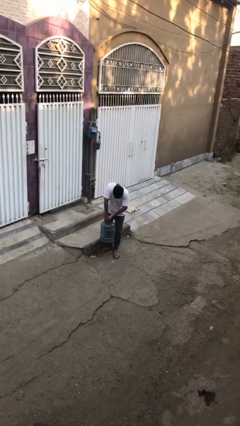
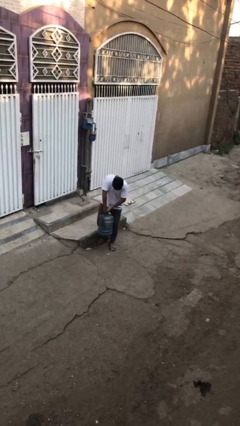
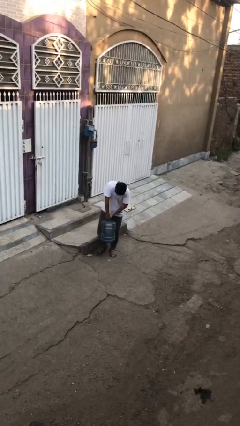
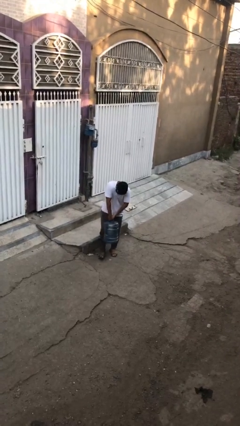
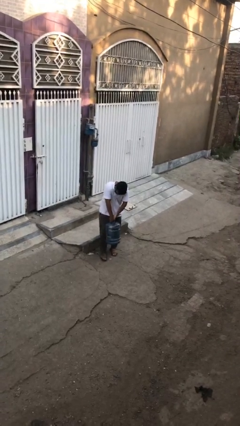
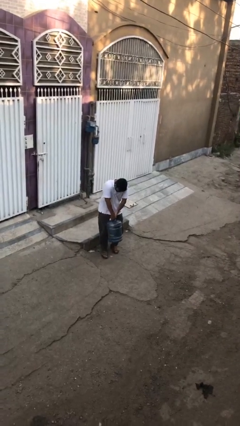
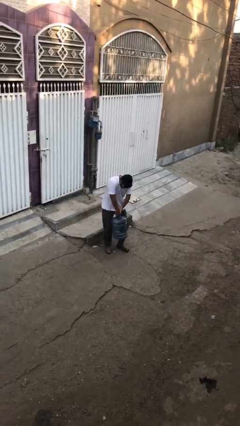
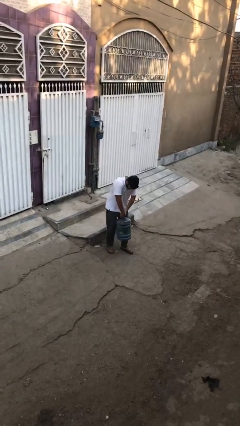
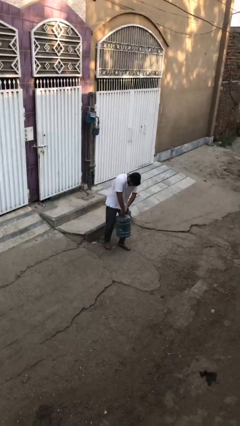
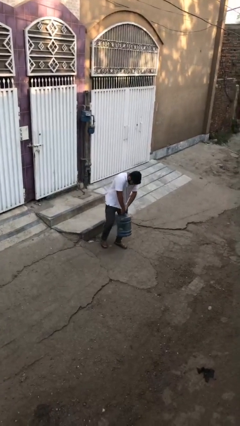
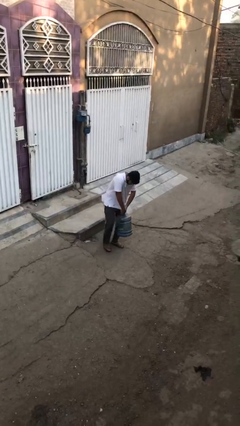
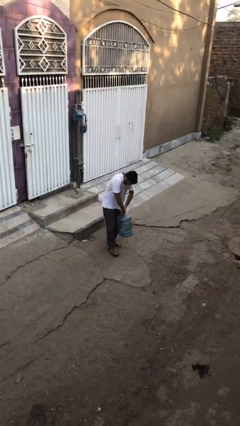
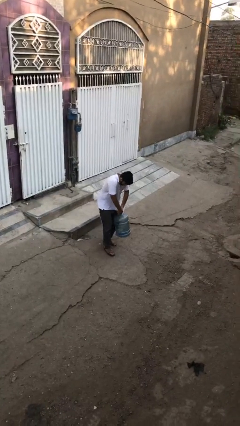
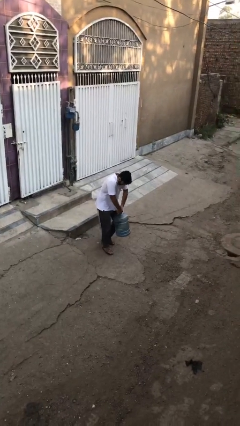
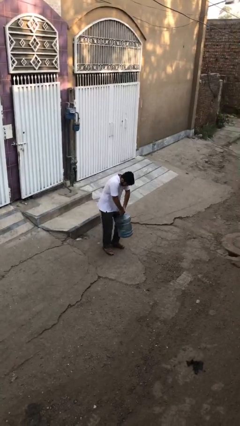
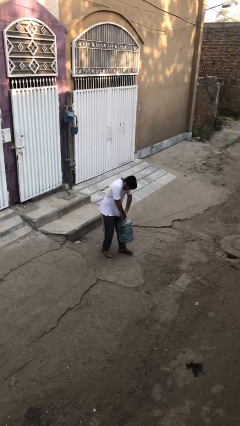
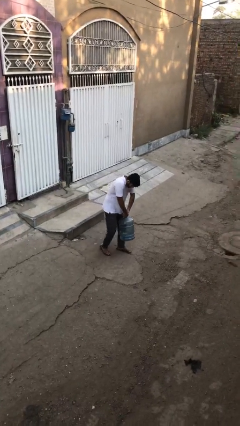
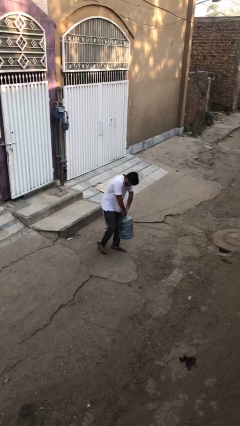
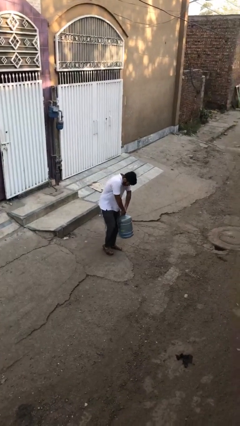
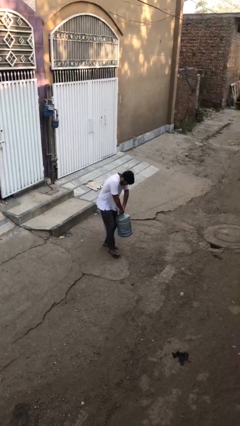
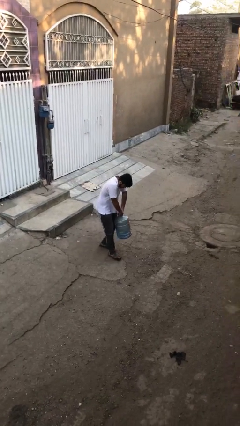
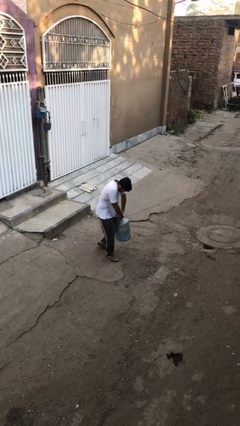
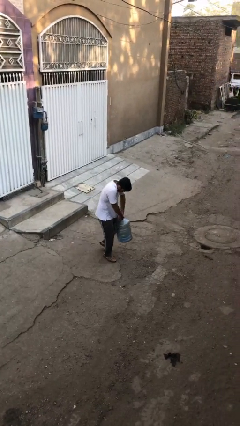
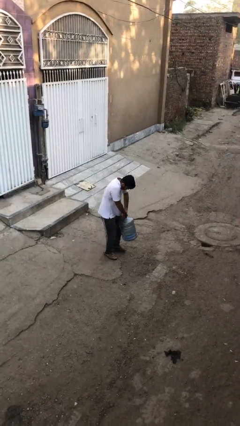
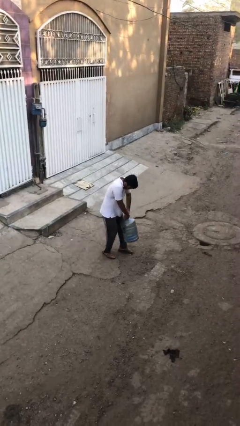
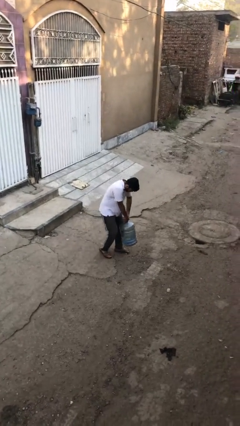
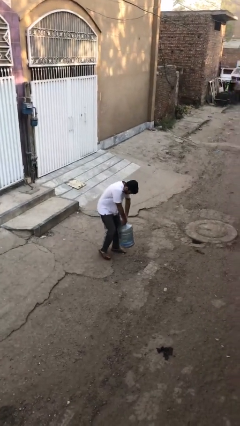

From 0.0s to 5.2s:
person carries heavy object

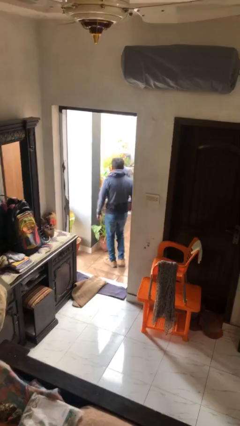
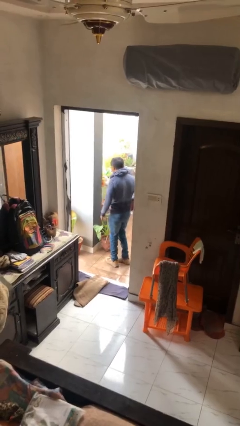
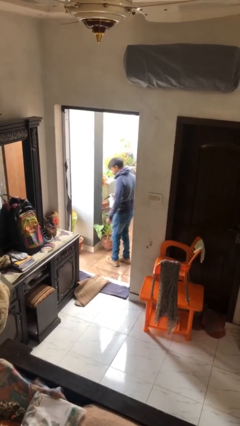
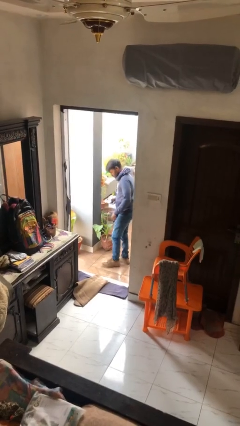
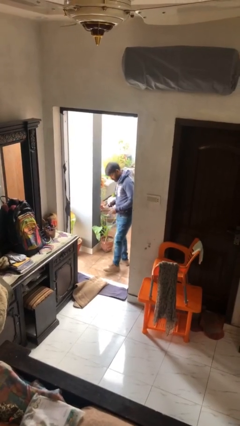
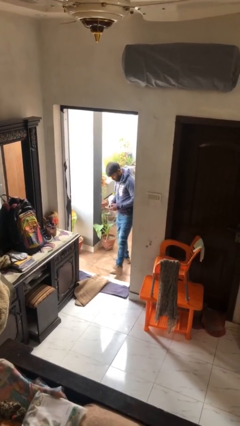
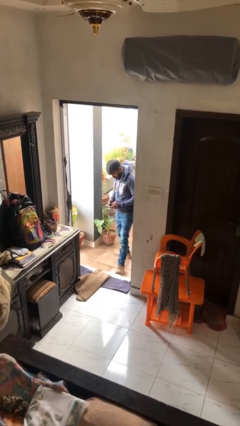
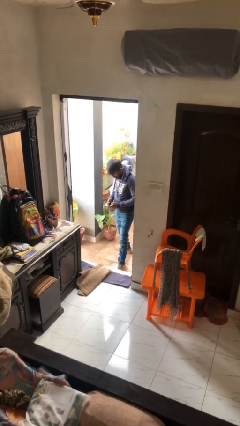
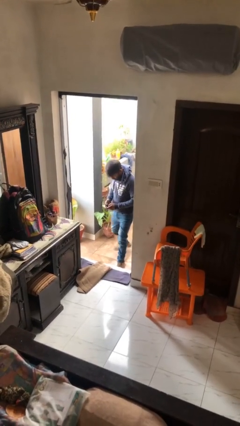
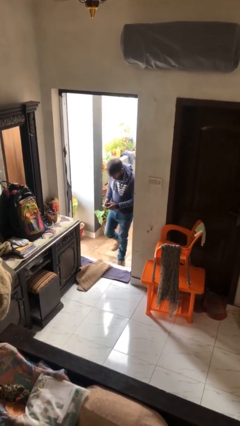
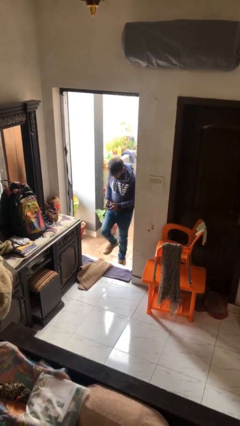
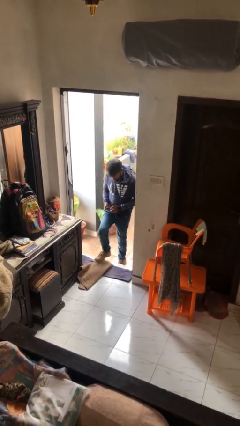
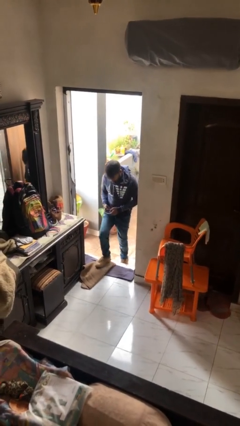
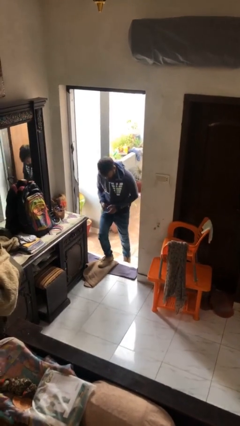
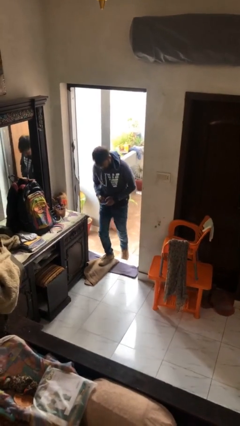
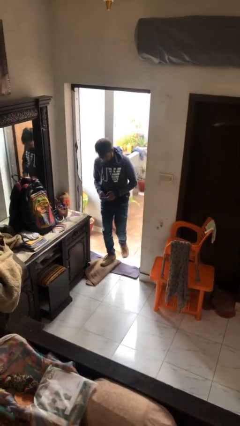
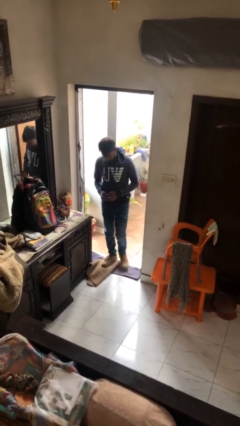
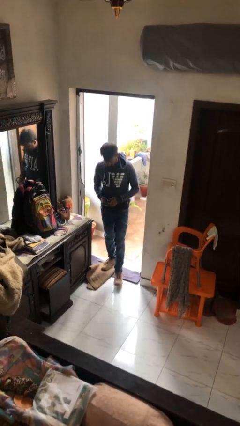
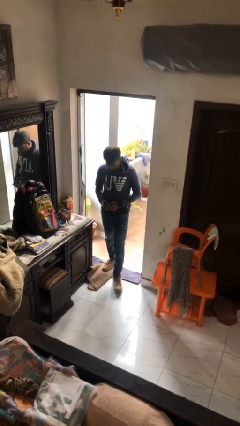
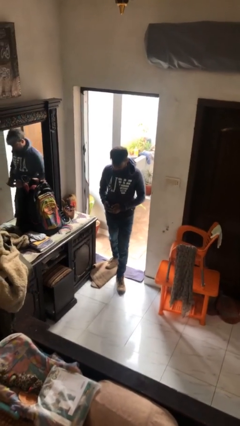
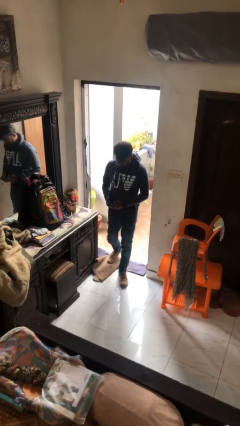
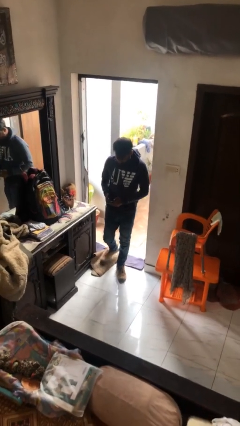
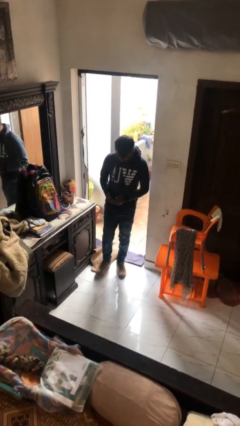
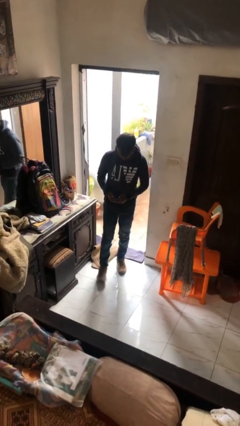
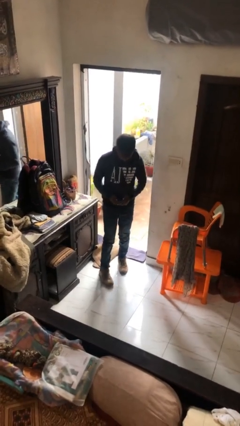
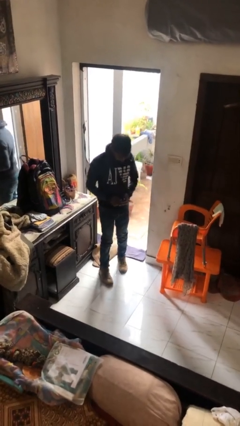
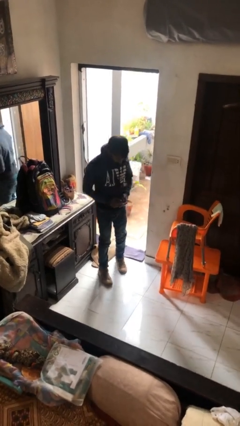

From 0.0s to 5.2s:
person enters scene through structure

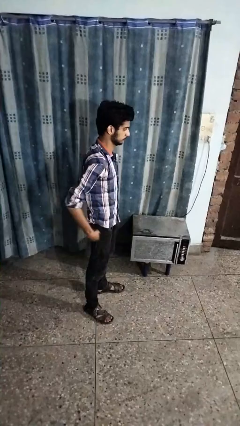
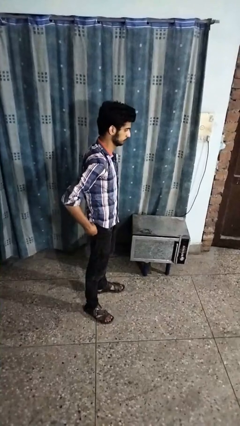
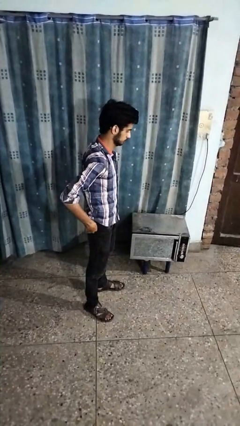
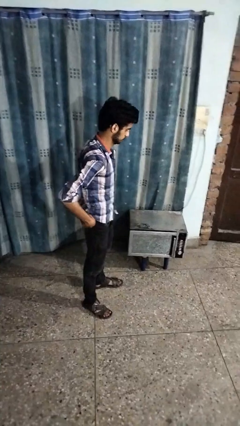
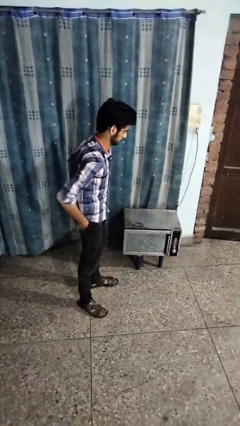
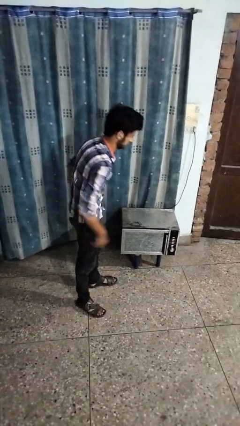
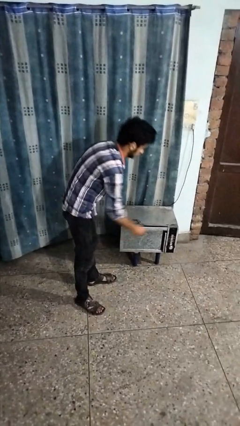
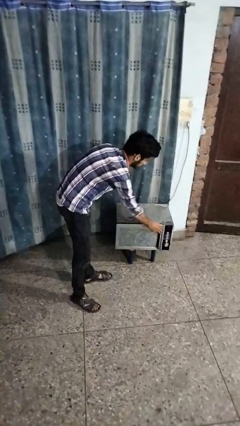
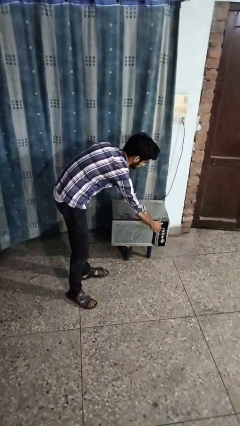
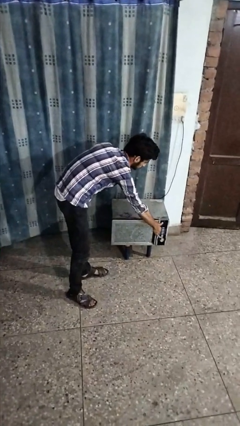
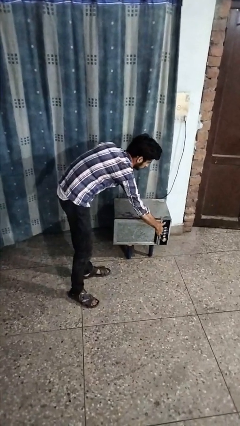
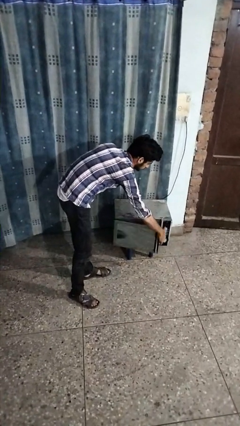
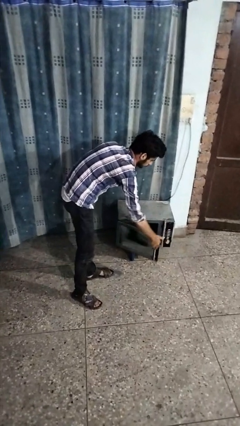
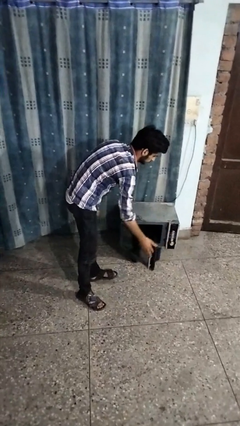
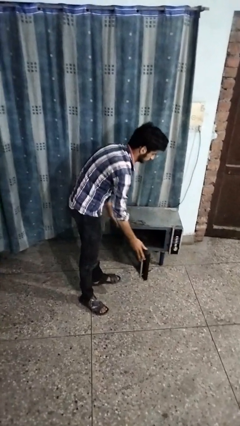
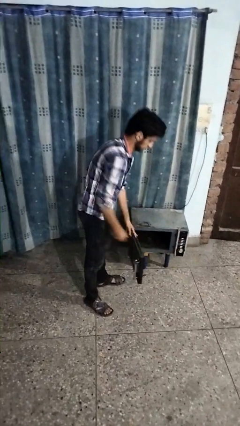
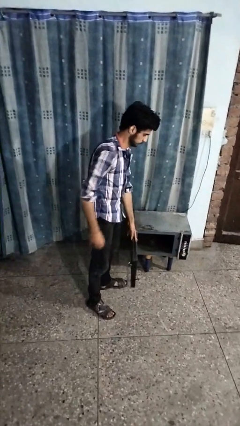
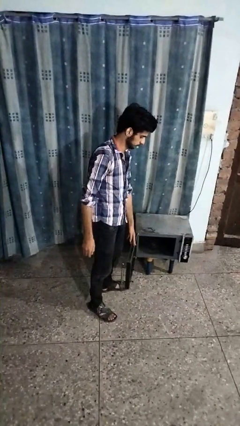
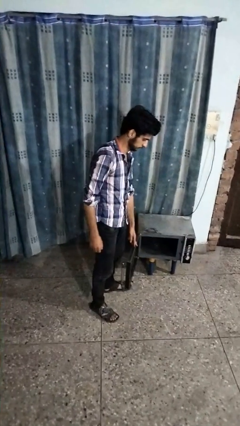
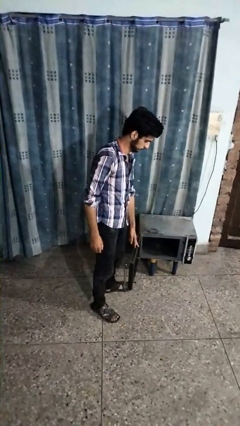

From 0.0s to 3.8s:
person opens oven door

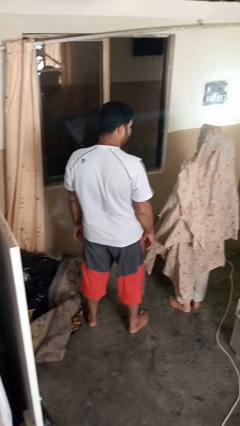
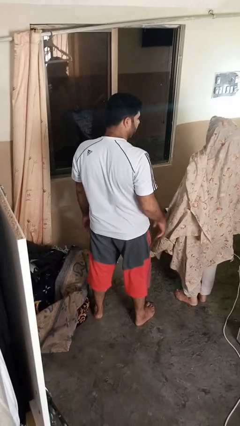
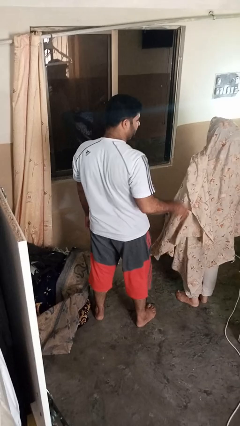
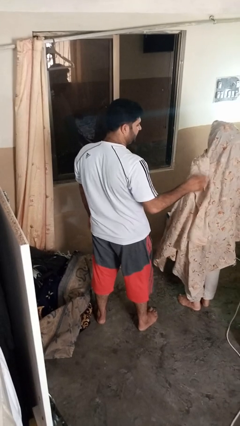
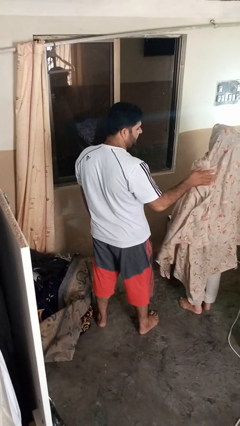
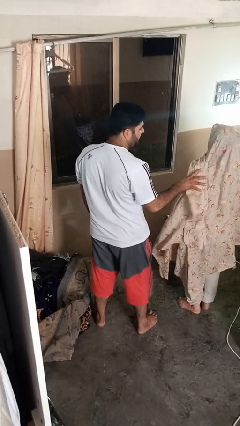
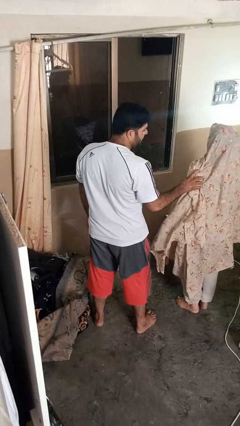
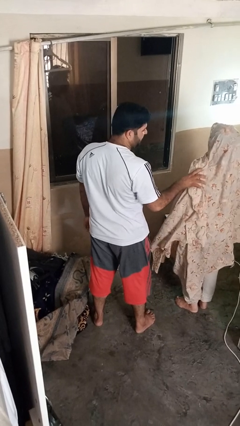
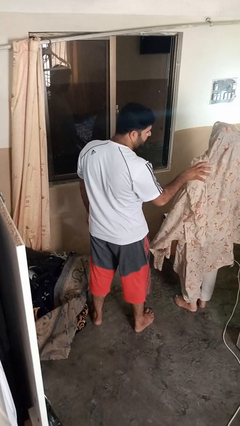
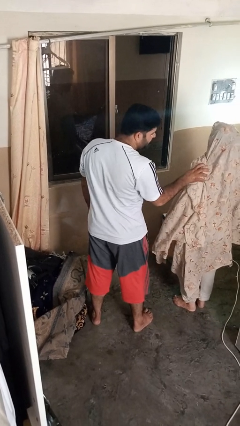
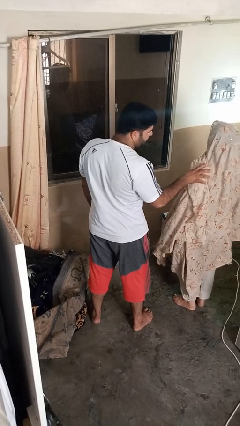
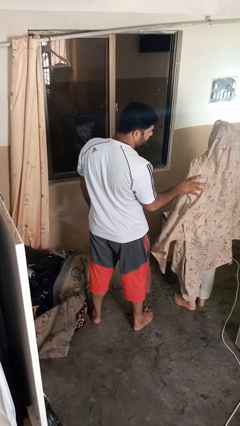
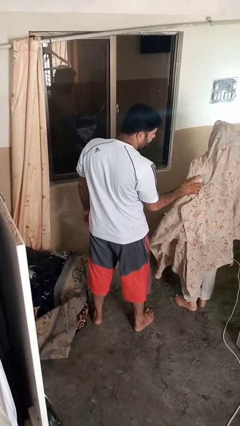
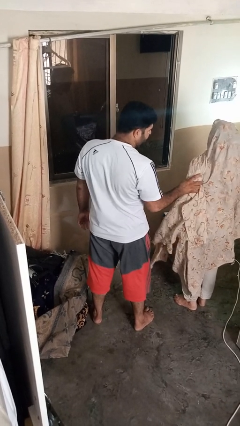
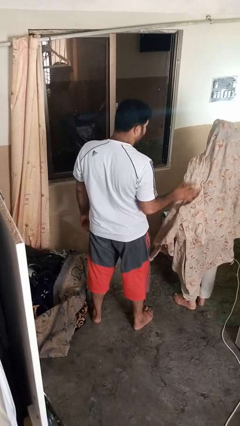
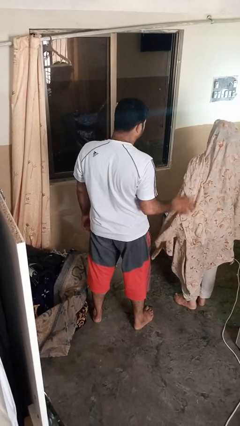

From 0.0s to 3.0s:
person grabs person by bicep

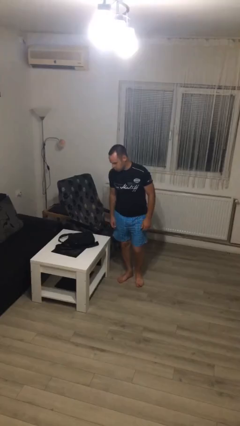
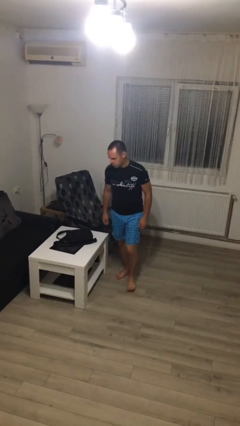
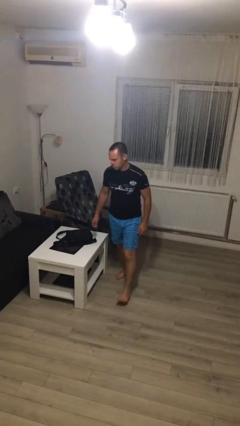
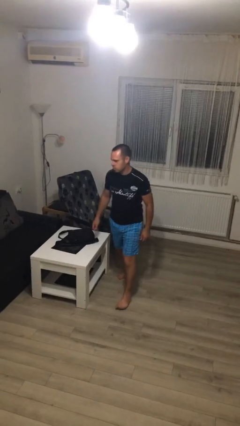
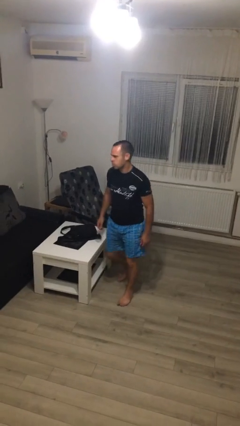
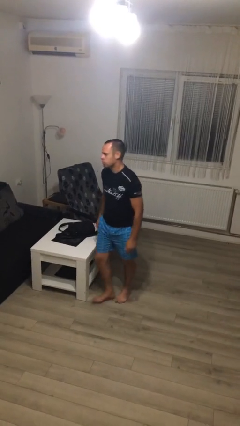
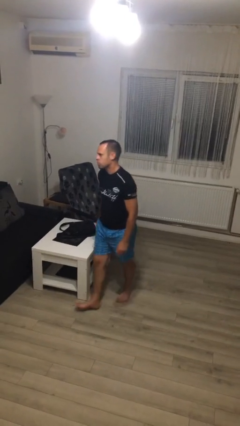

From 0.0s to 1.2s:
person puts down object on table
